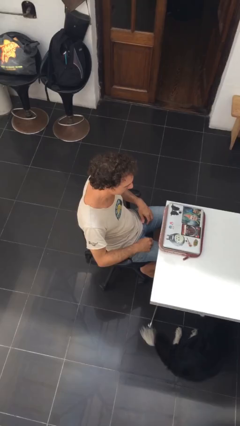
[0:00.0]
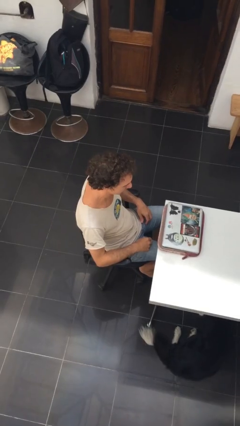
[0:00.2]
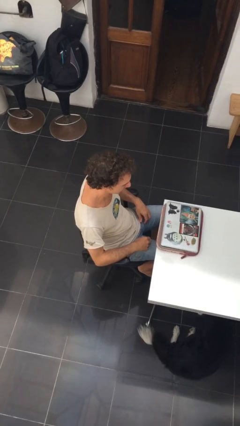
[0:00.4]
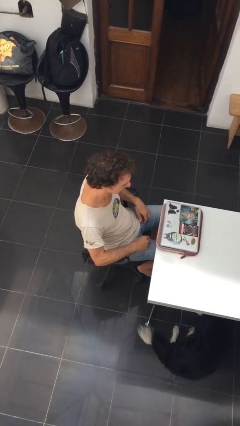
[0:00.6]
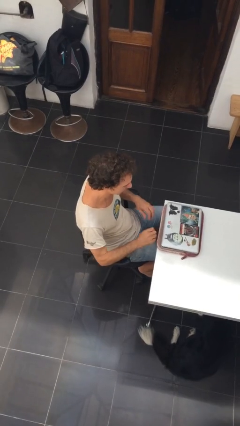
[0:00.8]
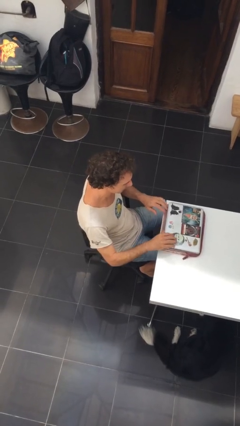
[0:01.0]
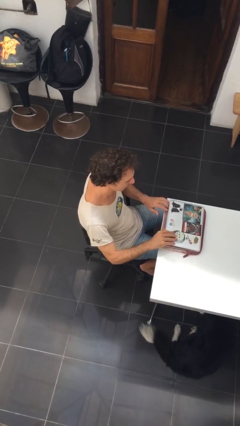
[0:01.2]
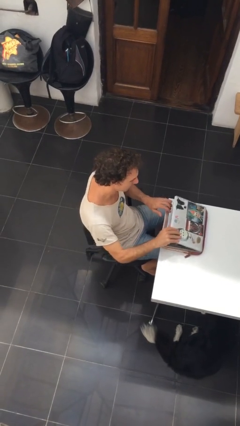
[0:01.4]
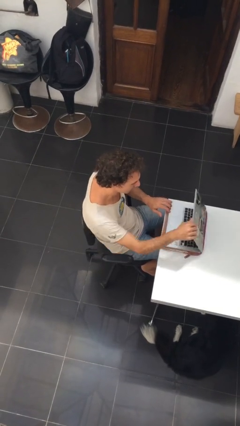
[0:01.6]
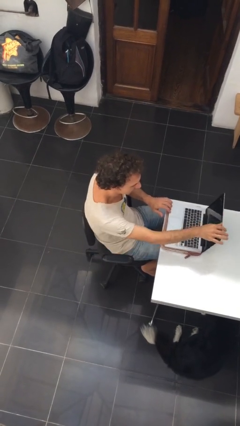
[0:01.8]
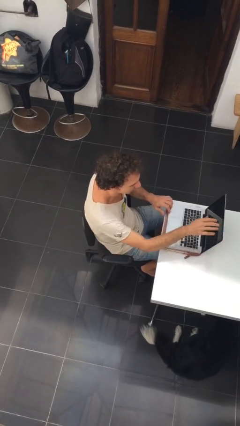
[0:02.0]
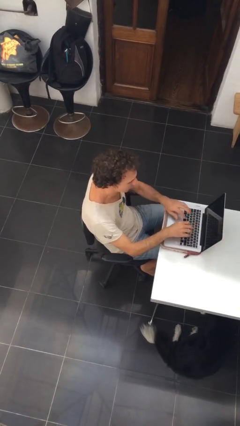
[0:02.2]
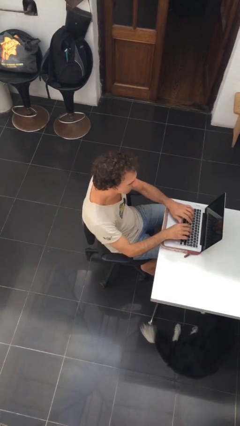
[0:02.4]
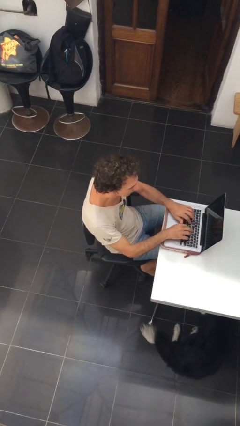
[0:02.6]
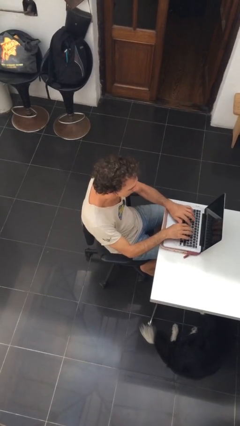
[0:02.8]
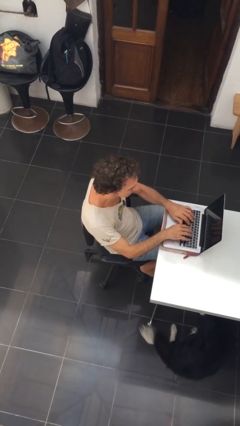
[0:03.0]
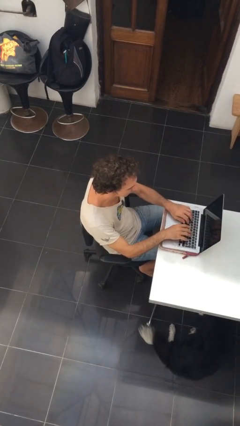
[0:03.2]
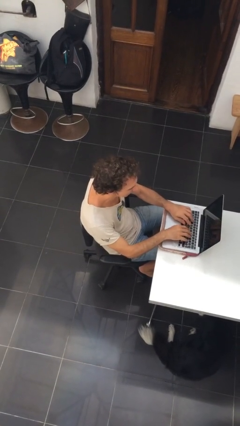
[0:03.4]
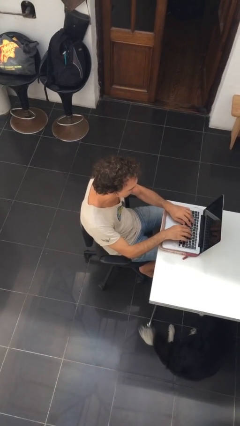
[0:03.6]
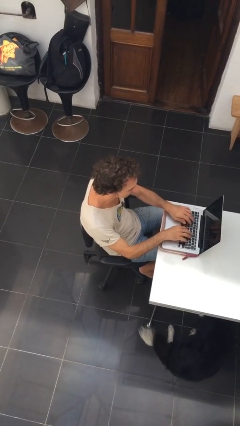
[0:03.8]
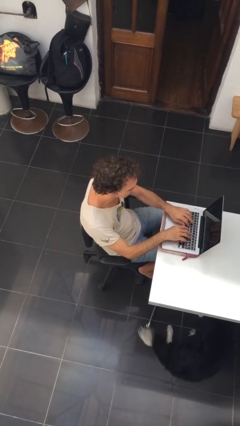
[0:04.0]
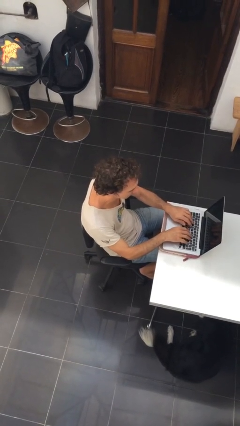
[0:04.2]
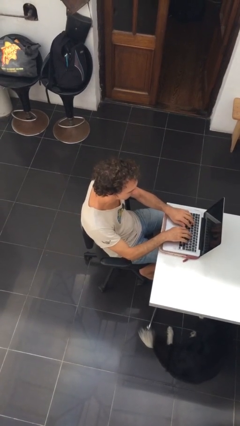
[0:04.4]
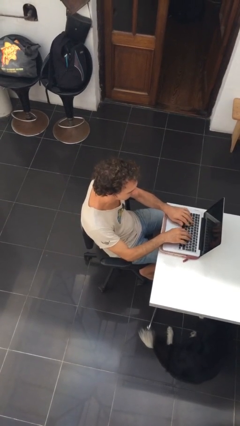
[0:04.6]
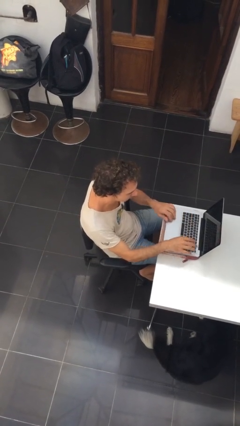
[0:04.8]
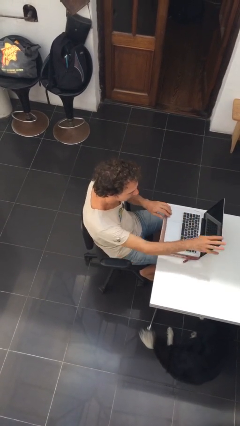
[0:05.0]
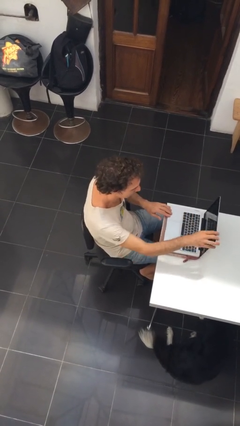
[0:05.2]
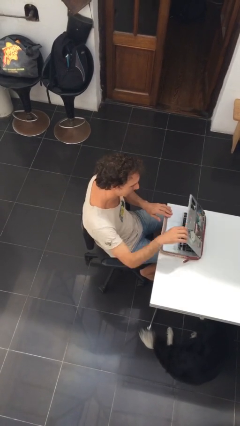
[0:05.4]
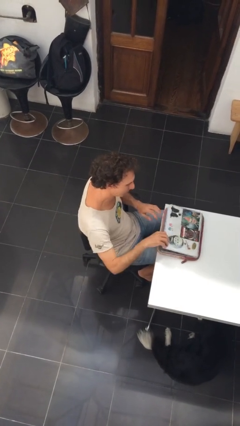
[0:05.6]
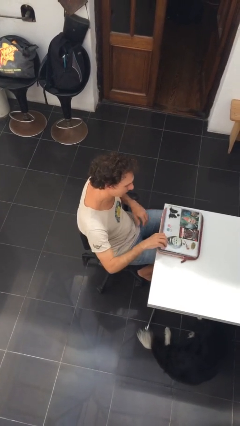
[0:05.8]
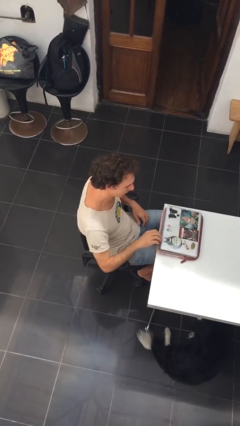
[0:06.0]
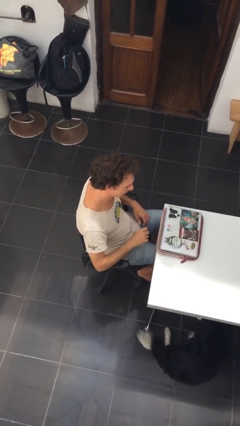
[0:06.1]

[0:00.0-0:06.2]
person interacts with laptop

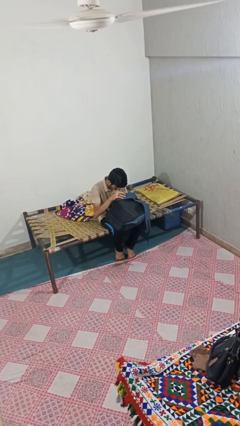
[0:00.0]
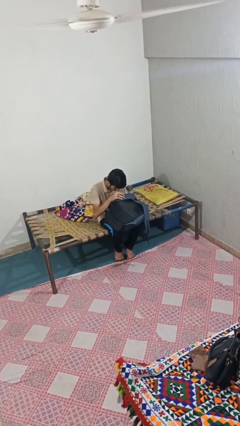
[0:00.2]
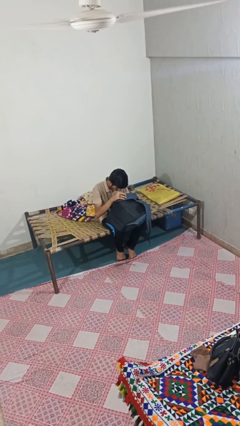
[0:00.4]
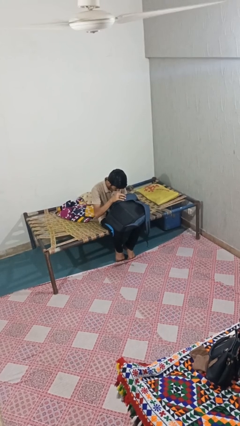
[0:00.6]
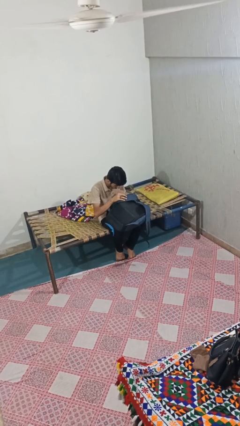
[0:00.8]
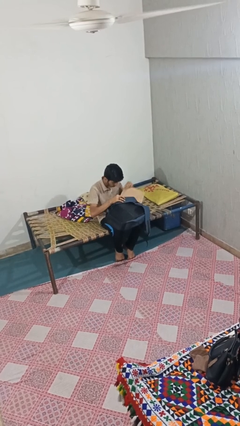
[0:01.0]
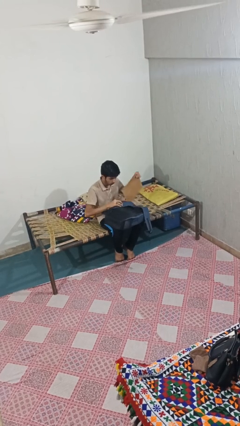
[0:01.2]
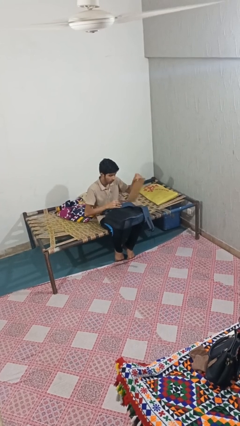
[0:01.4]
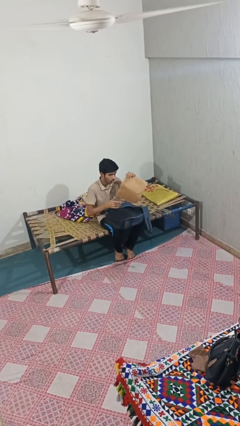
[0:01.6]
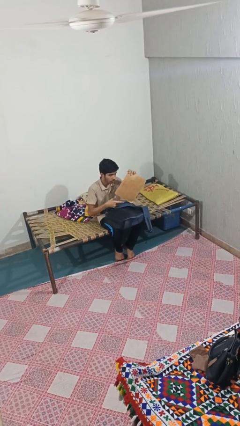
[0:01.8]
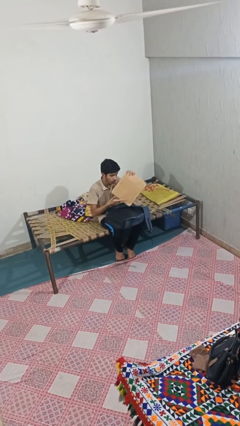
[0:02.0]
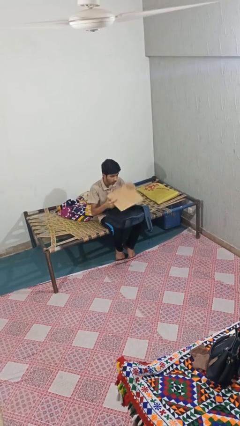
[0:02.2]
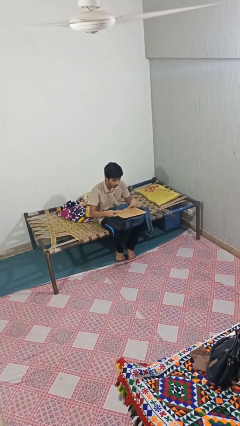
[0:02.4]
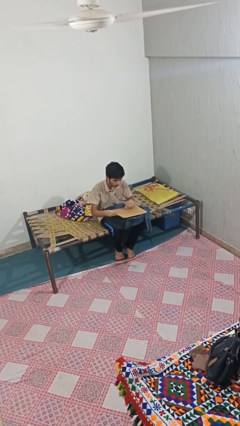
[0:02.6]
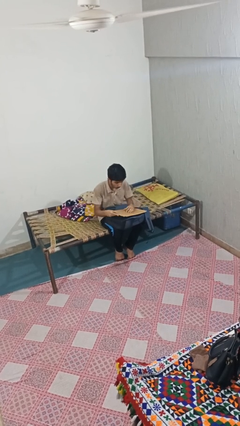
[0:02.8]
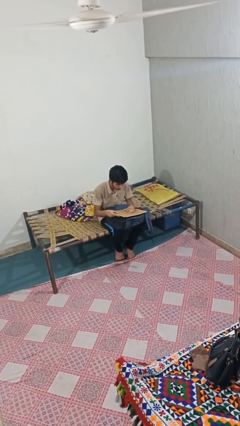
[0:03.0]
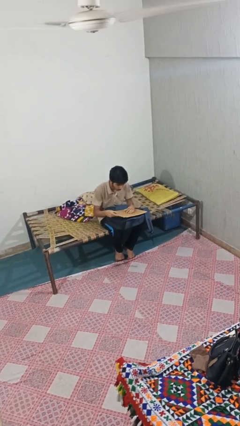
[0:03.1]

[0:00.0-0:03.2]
person takes object from backpack

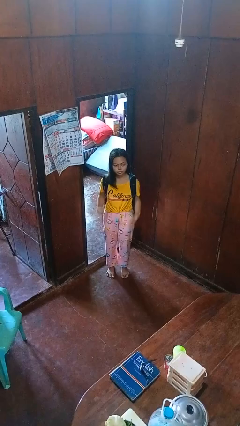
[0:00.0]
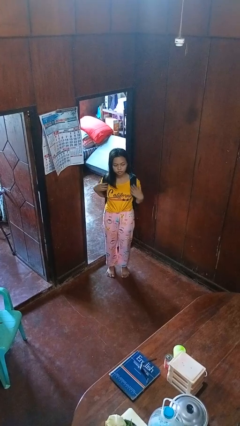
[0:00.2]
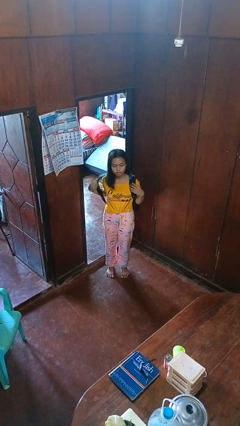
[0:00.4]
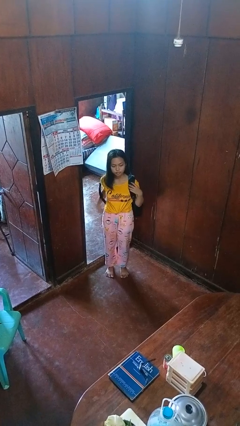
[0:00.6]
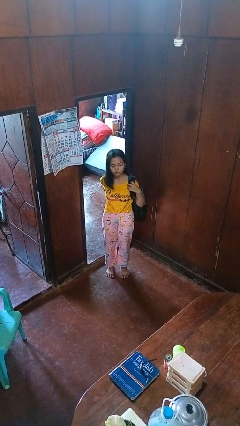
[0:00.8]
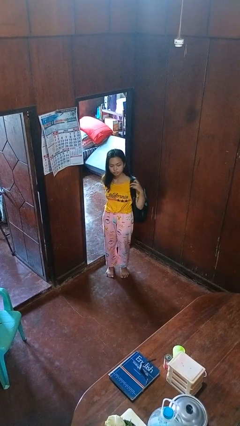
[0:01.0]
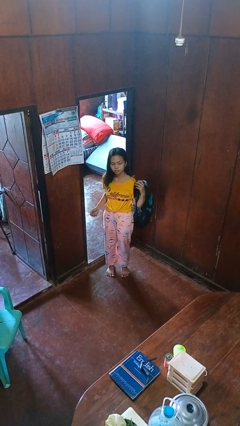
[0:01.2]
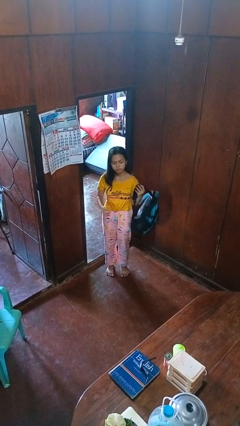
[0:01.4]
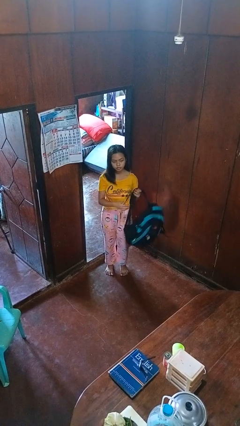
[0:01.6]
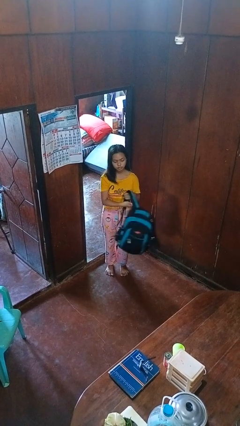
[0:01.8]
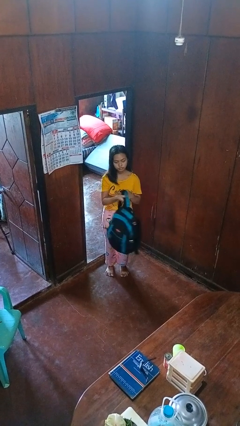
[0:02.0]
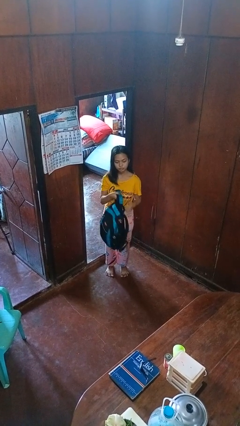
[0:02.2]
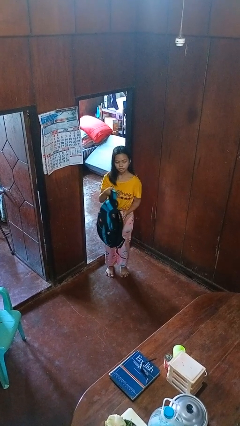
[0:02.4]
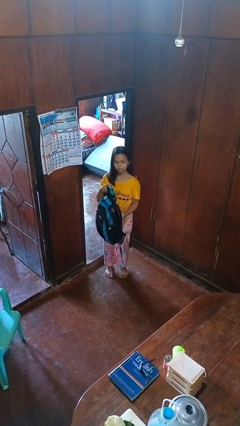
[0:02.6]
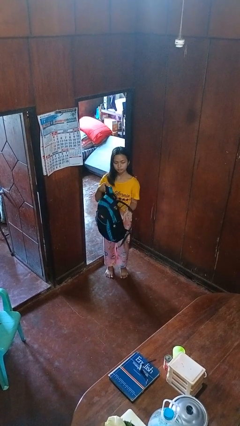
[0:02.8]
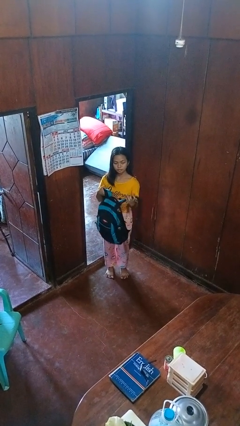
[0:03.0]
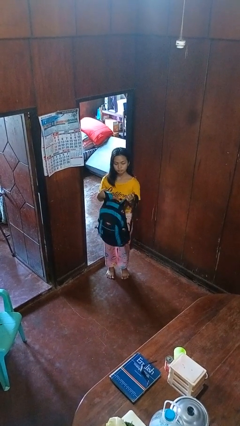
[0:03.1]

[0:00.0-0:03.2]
person takes off backpack

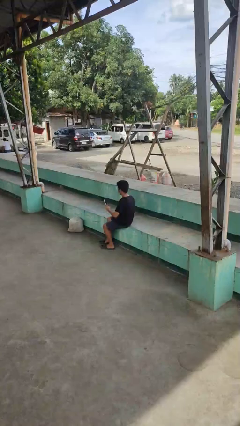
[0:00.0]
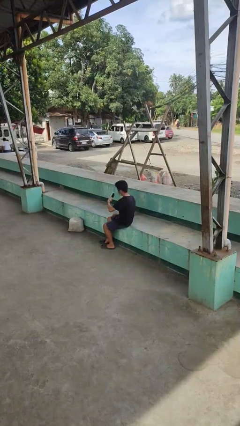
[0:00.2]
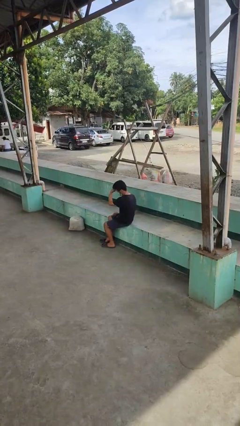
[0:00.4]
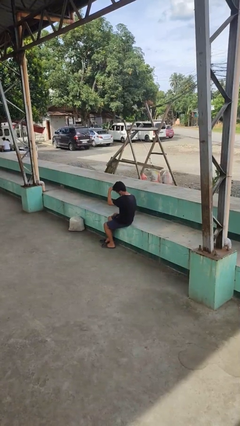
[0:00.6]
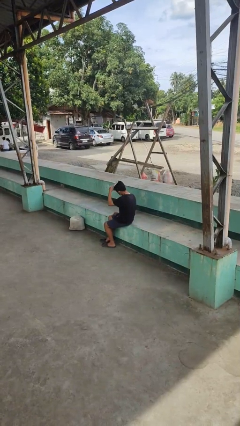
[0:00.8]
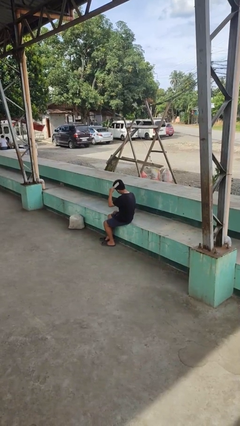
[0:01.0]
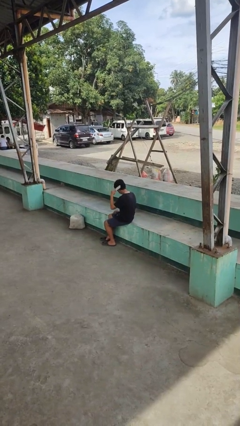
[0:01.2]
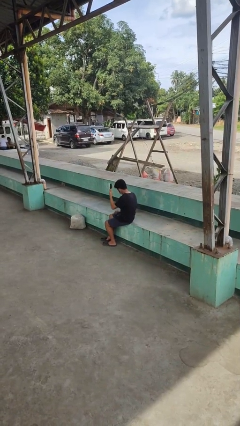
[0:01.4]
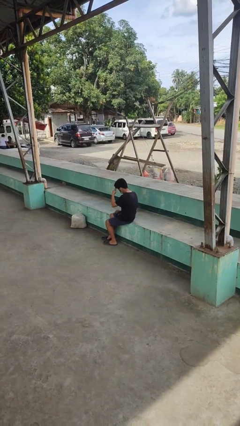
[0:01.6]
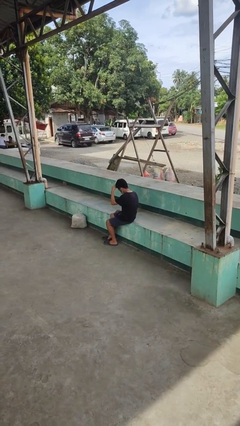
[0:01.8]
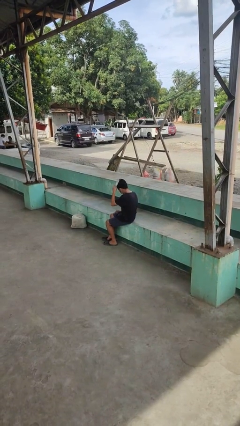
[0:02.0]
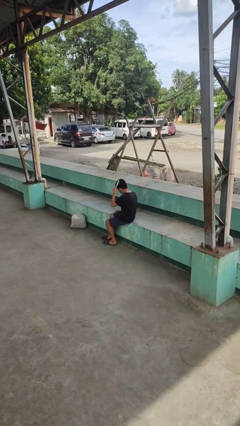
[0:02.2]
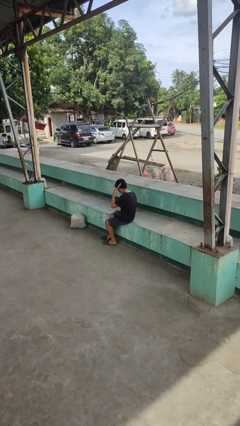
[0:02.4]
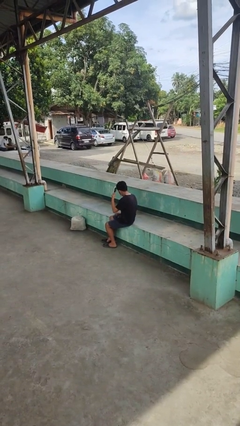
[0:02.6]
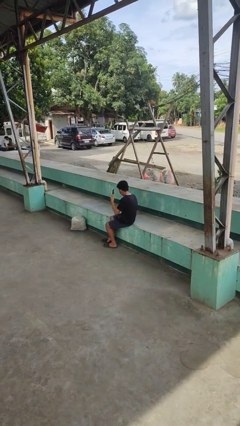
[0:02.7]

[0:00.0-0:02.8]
person brushes hair

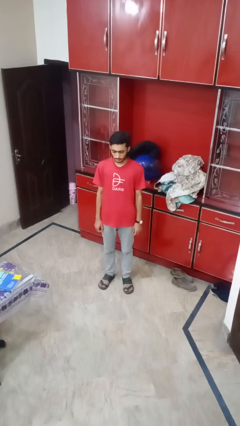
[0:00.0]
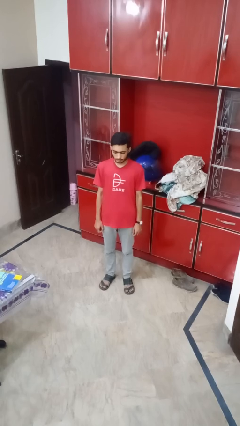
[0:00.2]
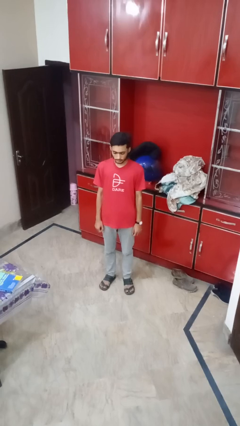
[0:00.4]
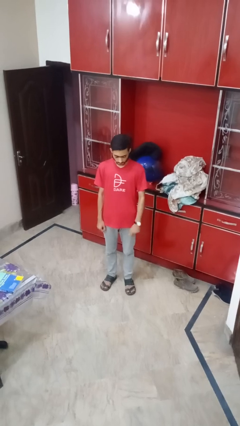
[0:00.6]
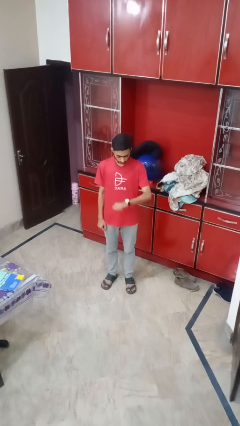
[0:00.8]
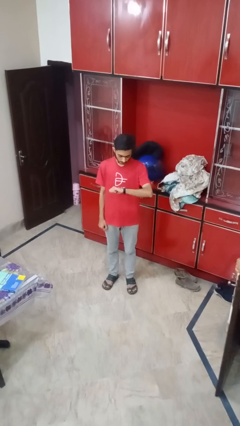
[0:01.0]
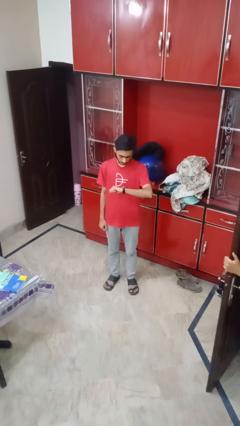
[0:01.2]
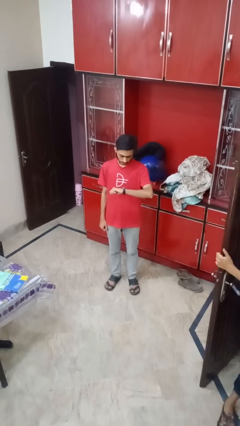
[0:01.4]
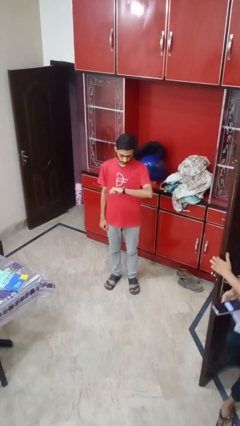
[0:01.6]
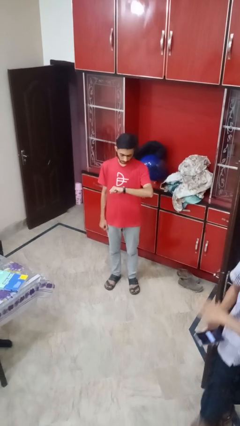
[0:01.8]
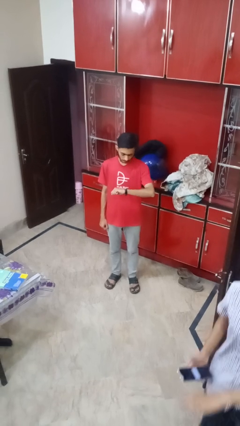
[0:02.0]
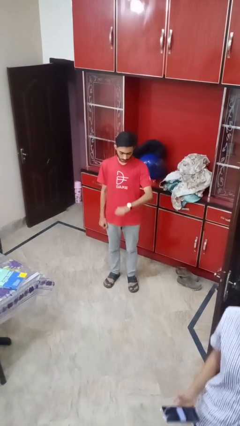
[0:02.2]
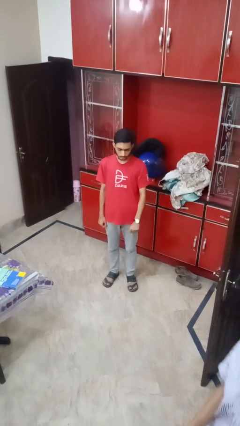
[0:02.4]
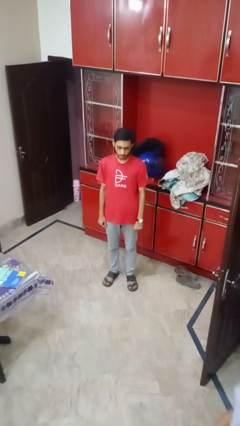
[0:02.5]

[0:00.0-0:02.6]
person looks at wristwatch
